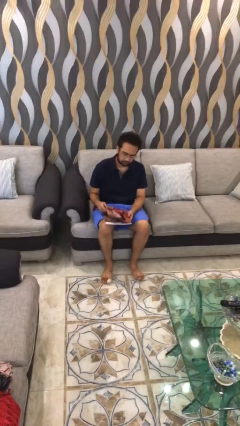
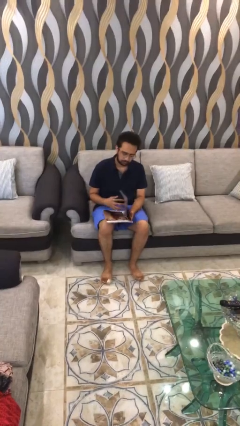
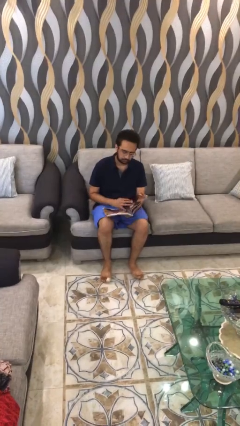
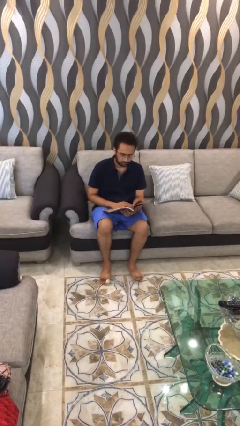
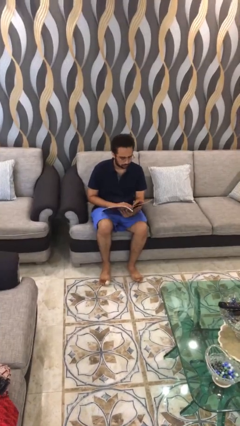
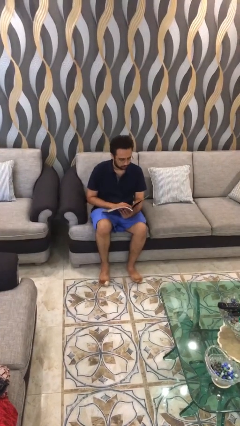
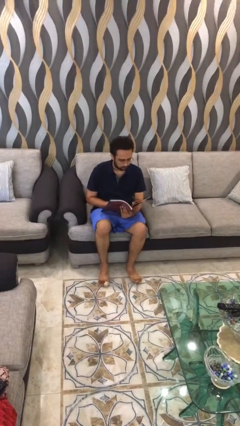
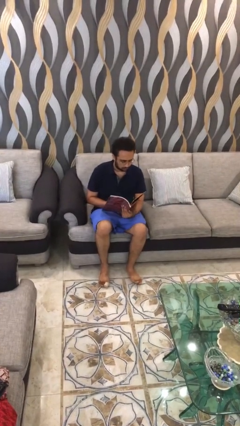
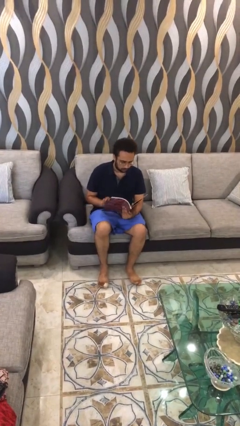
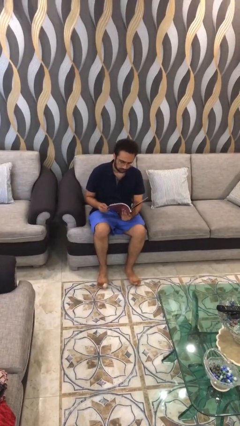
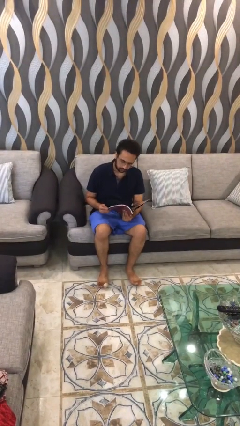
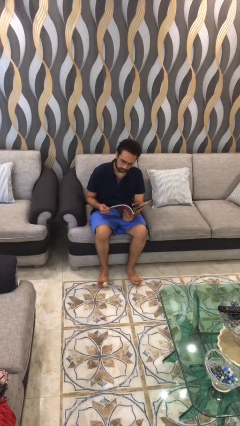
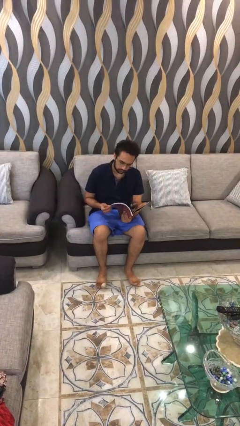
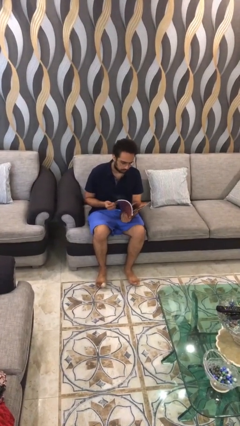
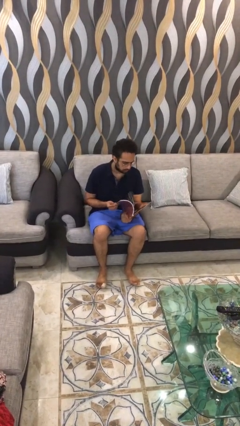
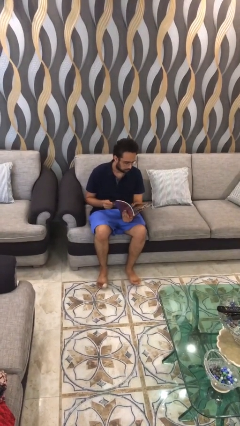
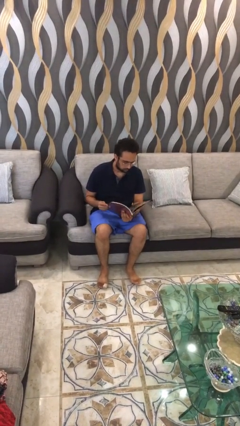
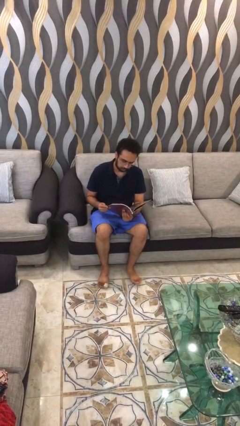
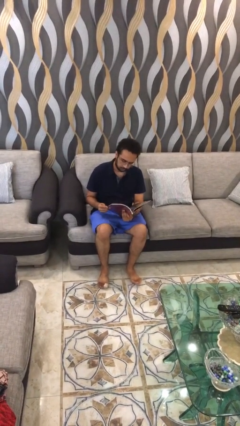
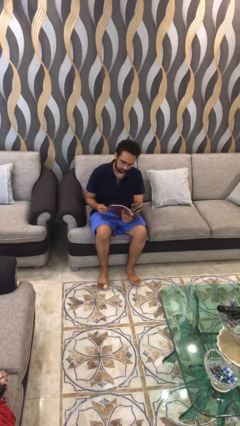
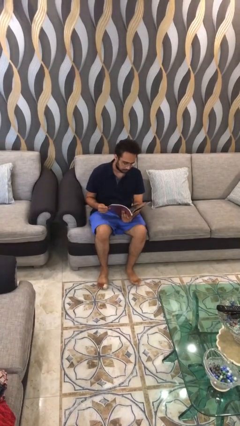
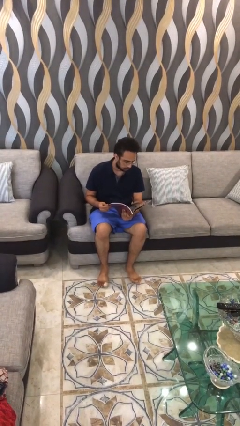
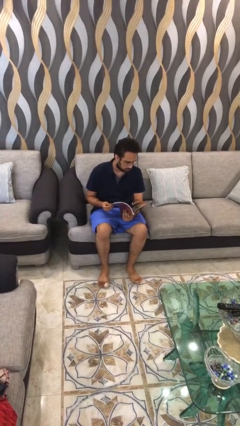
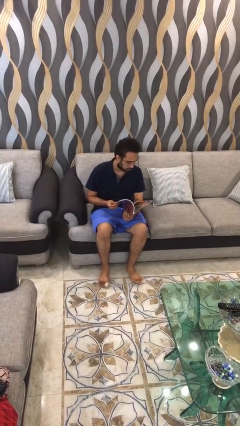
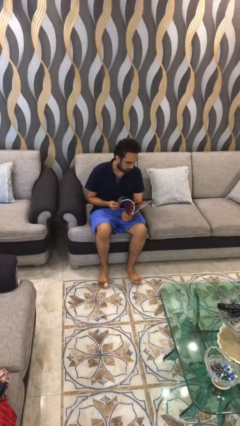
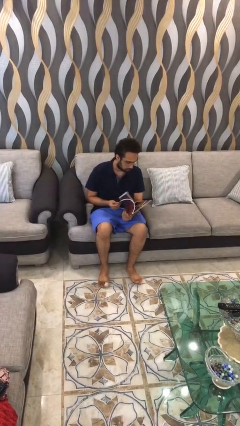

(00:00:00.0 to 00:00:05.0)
person reads document

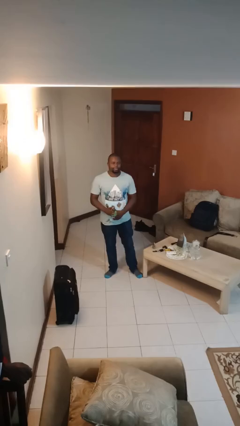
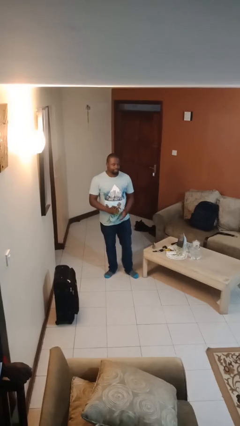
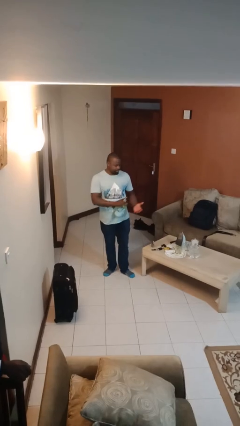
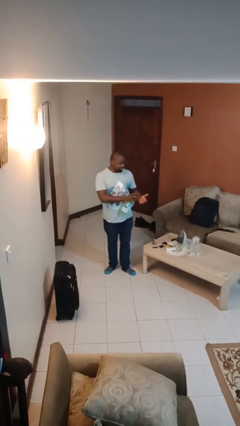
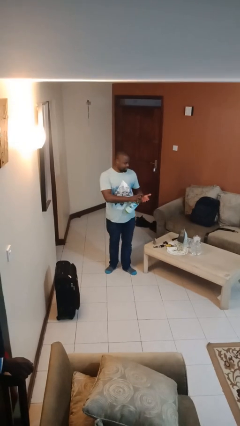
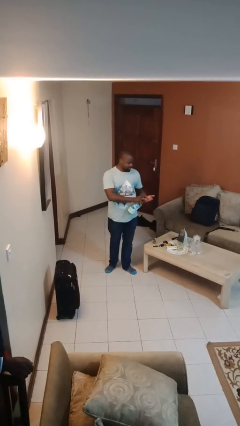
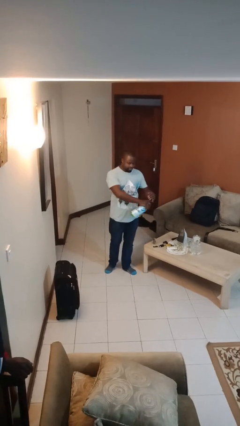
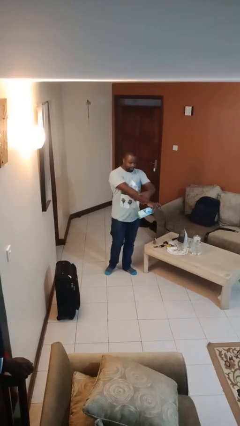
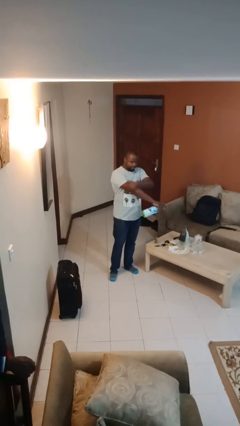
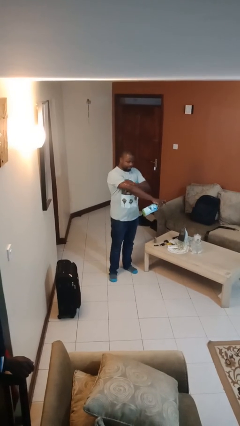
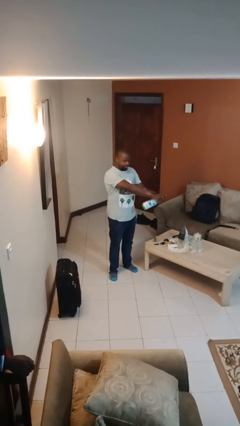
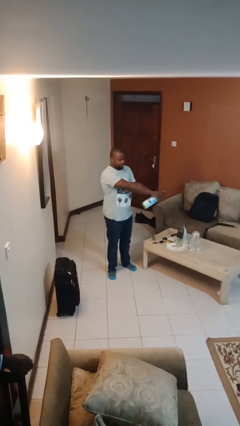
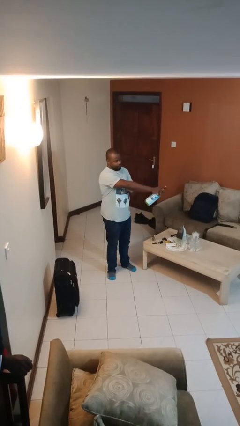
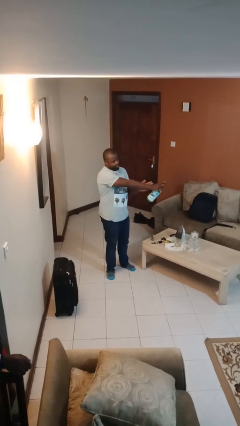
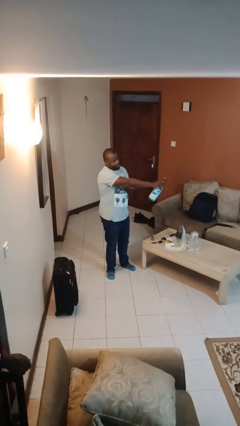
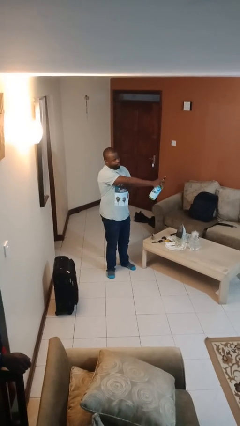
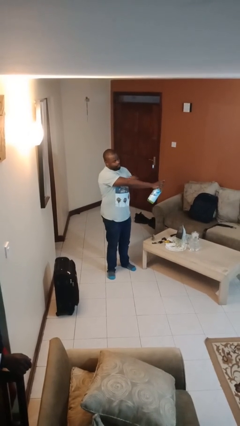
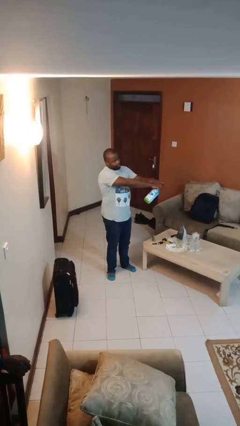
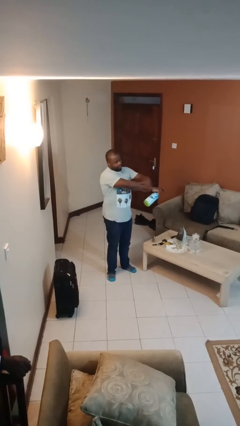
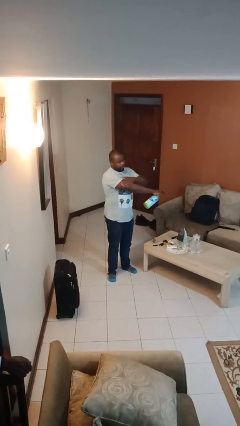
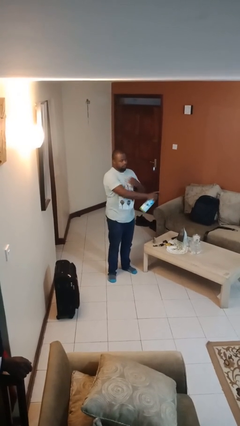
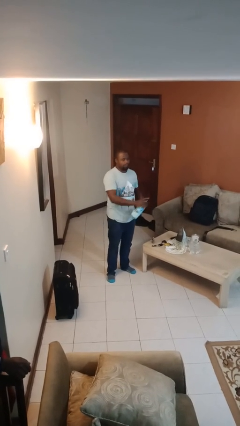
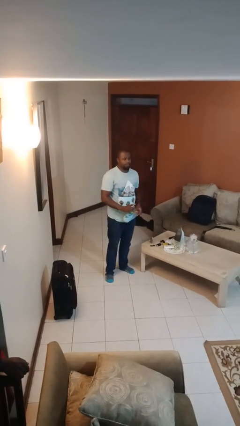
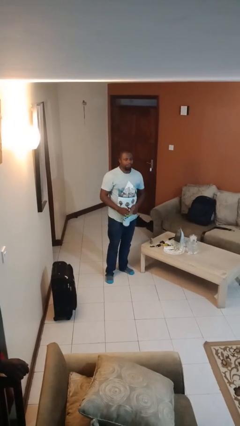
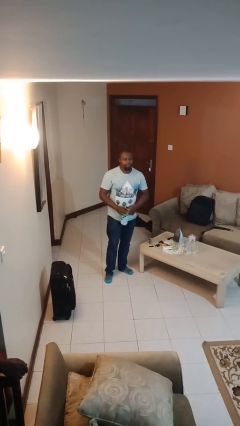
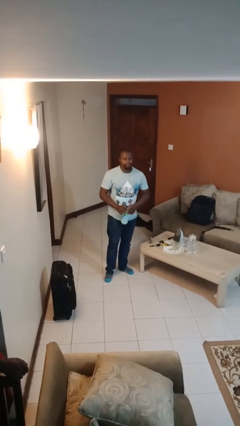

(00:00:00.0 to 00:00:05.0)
person applies sunscreen

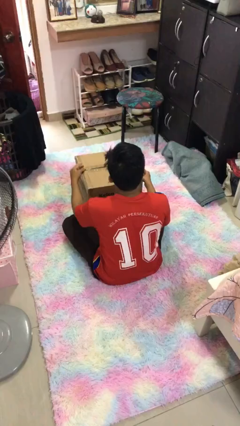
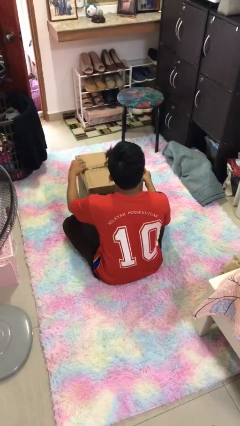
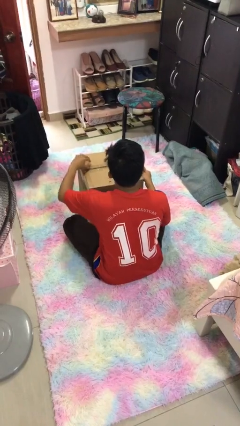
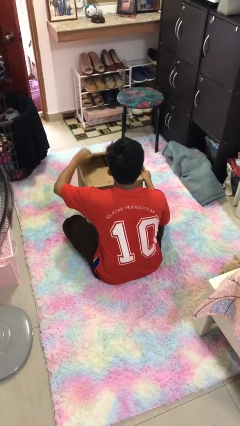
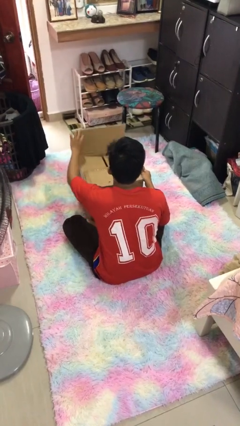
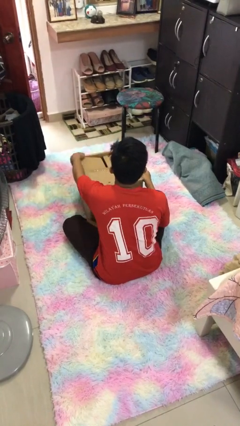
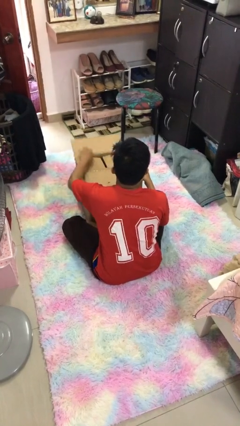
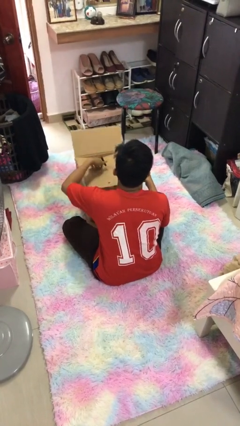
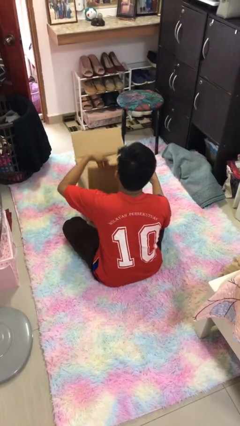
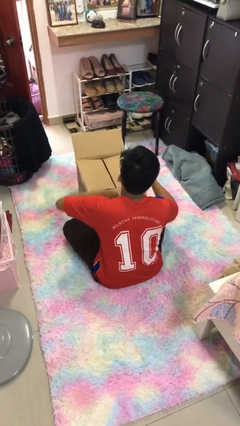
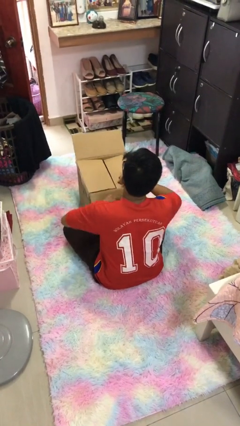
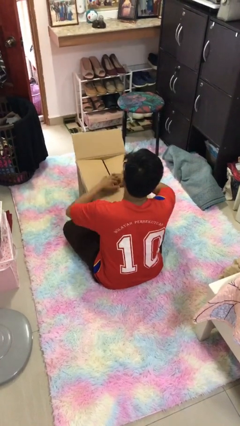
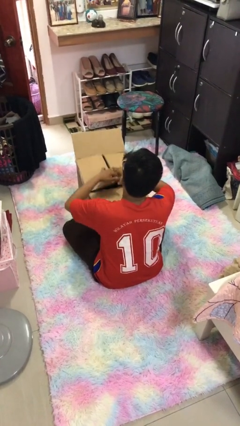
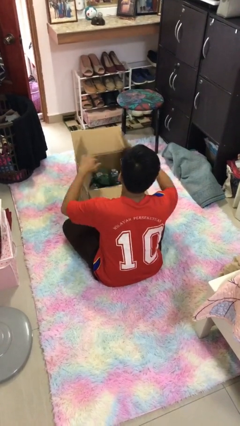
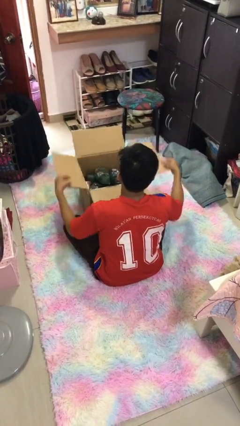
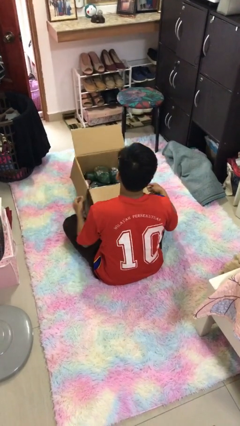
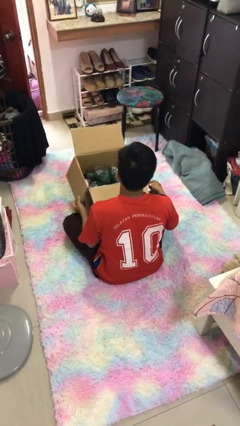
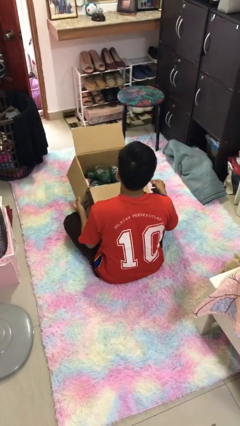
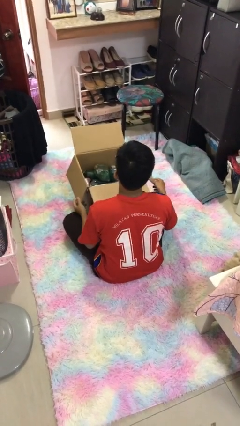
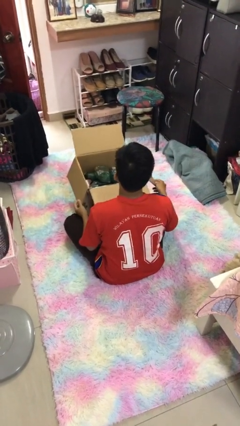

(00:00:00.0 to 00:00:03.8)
person opens box

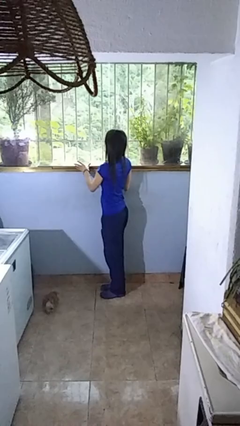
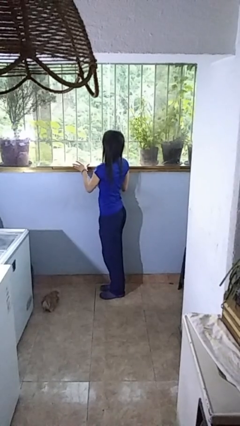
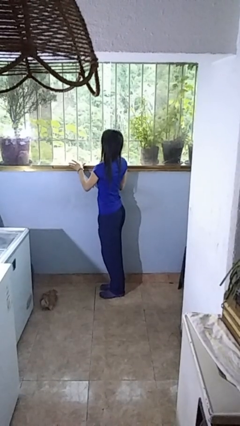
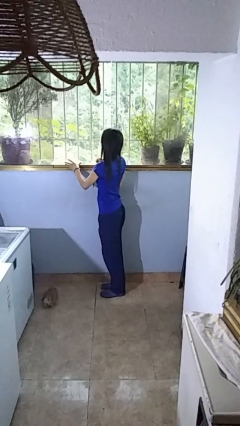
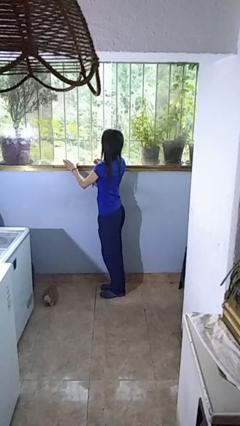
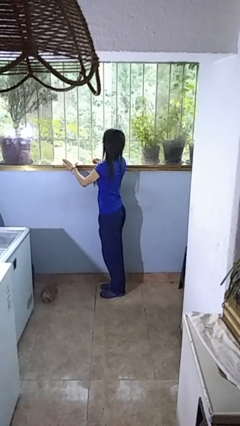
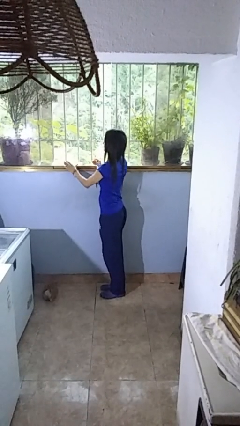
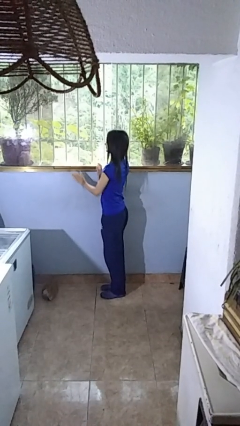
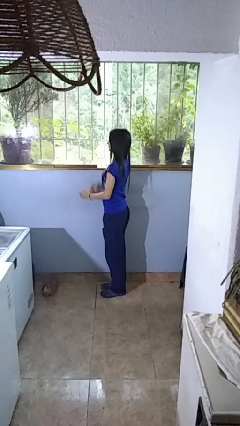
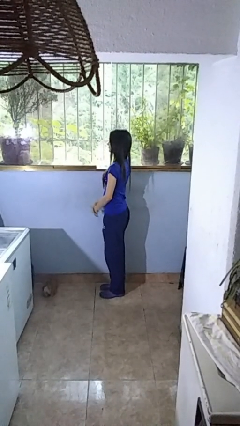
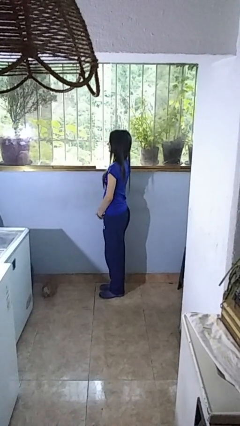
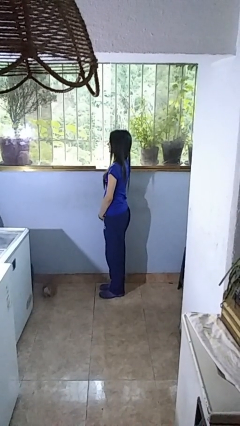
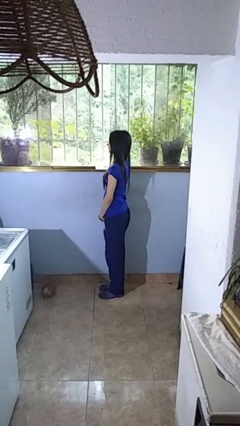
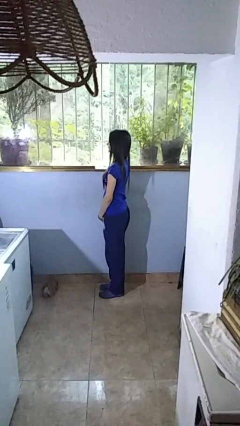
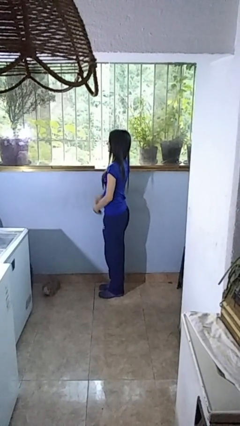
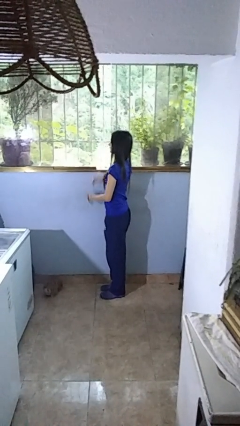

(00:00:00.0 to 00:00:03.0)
person opens home window

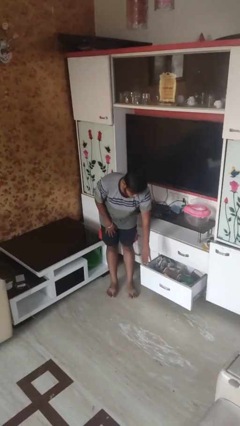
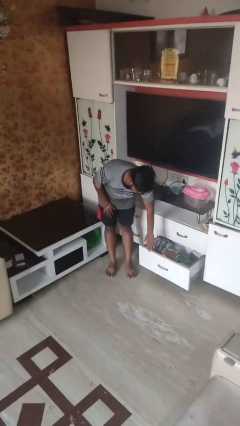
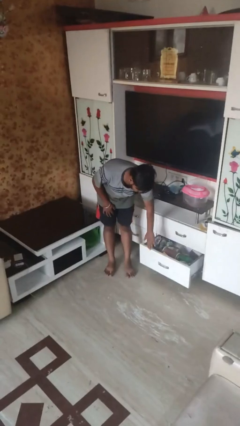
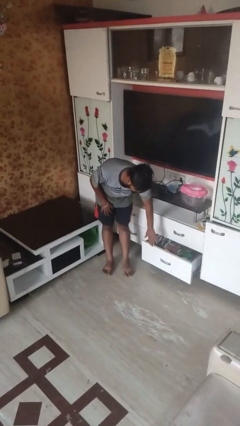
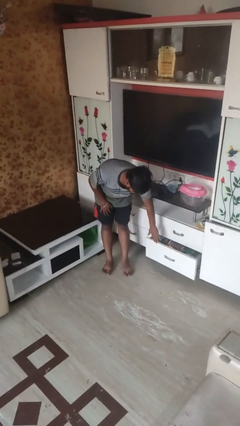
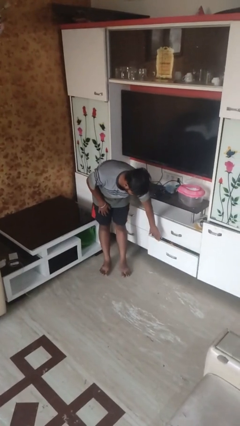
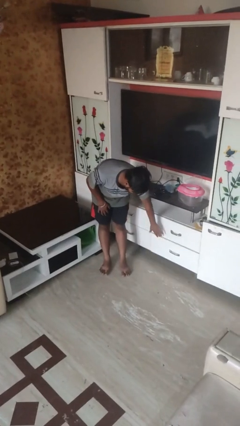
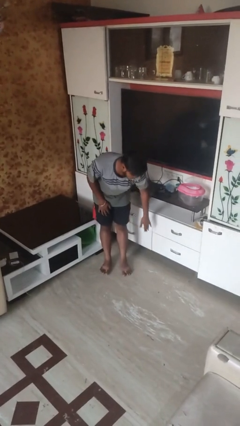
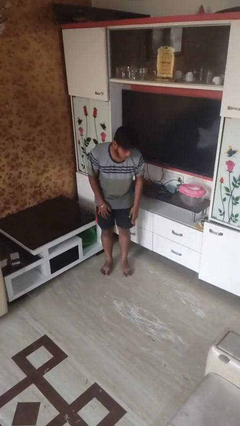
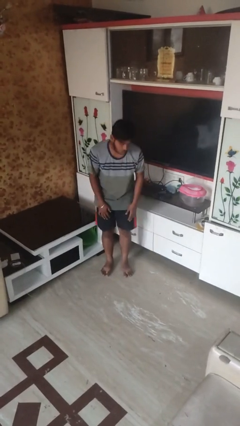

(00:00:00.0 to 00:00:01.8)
person closes dresser drawer
